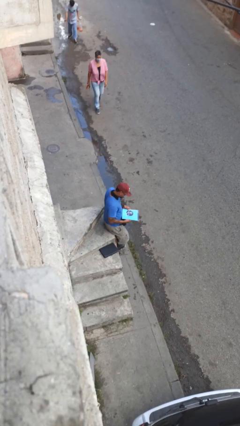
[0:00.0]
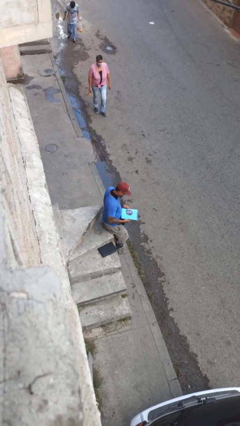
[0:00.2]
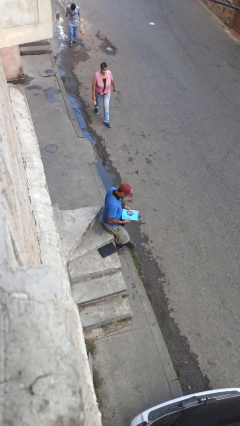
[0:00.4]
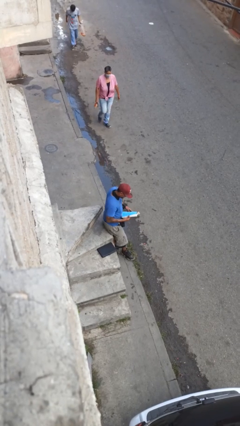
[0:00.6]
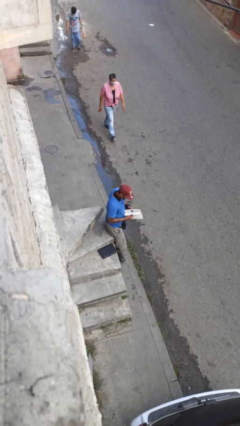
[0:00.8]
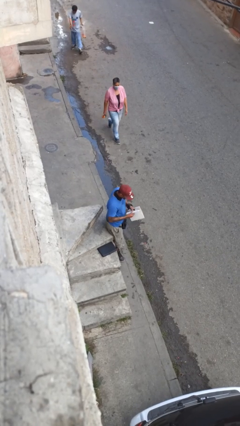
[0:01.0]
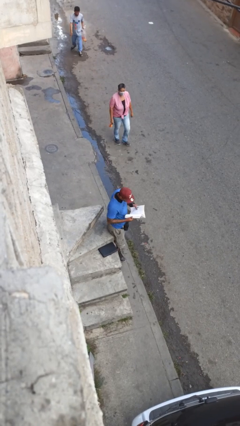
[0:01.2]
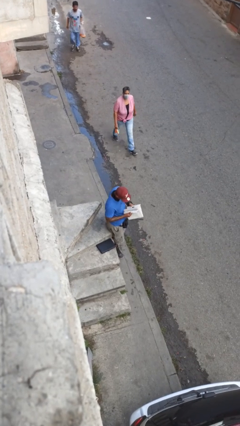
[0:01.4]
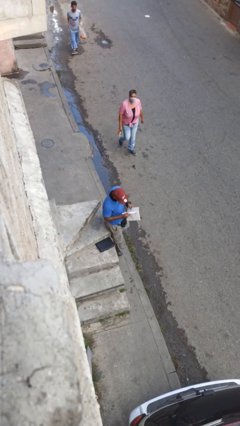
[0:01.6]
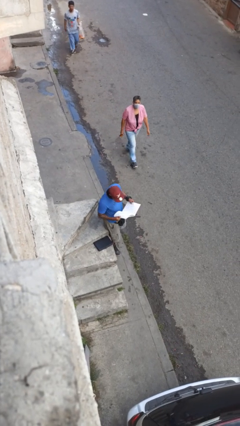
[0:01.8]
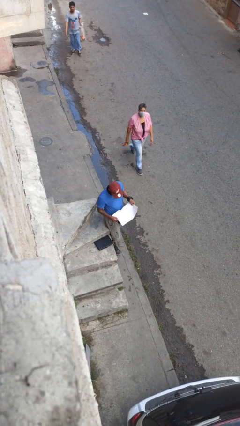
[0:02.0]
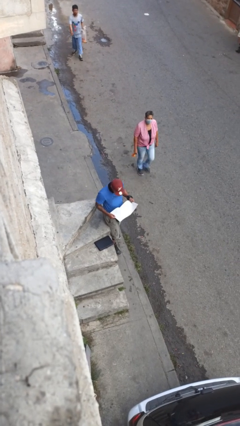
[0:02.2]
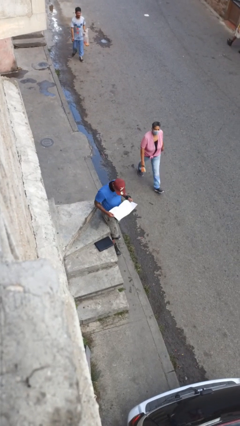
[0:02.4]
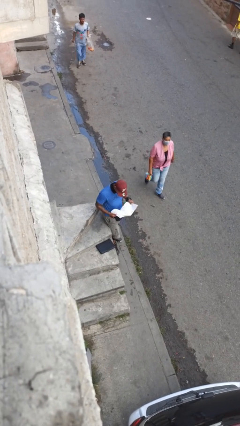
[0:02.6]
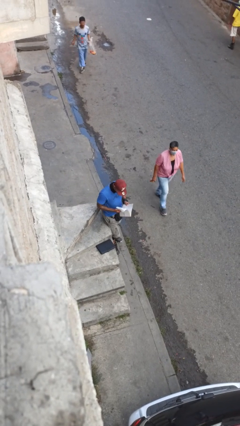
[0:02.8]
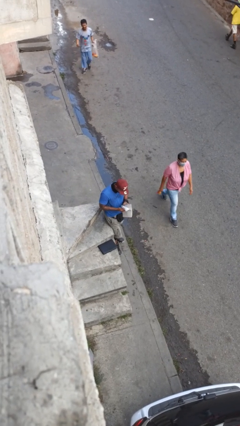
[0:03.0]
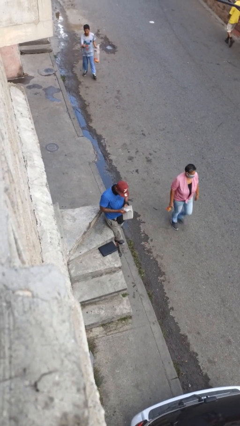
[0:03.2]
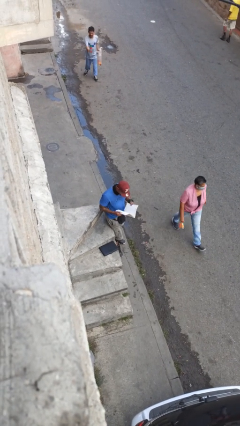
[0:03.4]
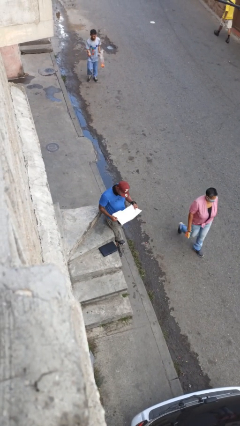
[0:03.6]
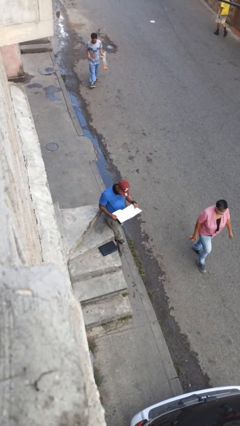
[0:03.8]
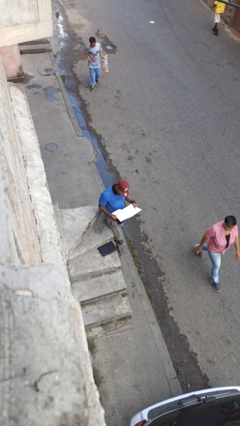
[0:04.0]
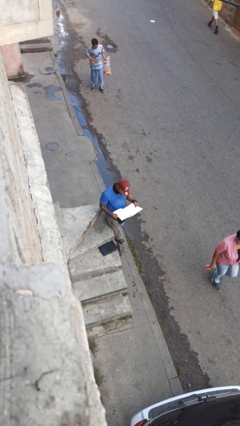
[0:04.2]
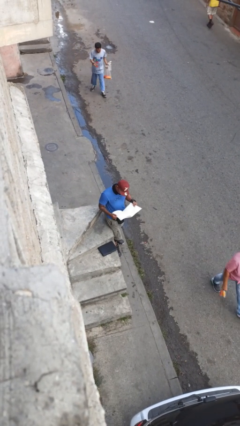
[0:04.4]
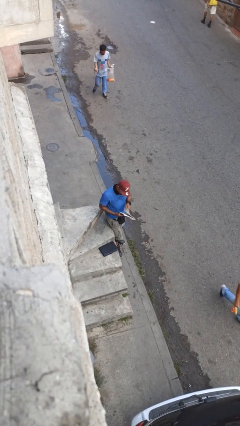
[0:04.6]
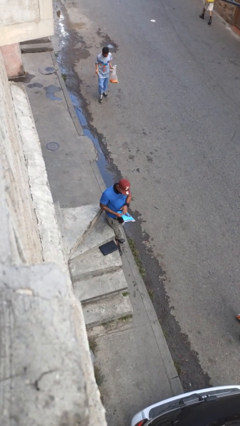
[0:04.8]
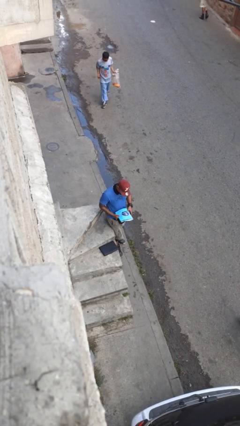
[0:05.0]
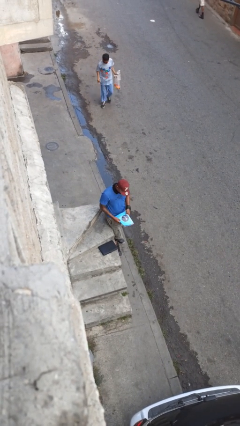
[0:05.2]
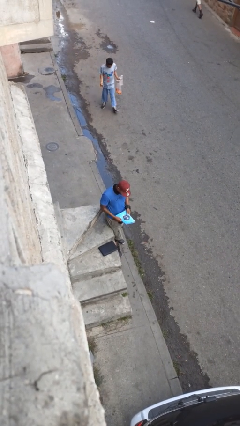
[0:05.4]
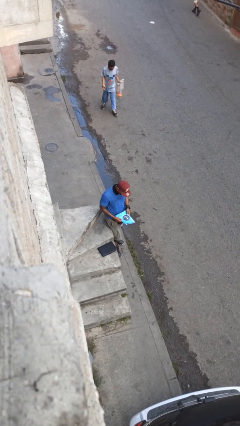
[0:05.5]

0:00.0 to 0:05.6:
person reads document

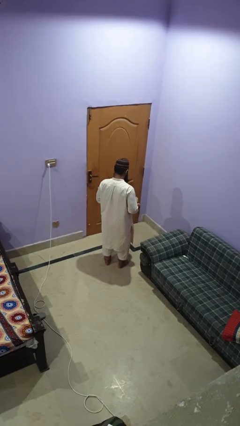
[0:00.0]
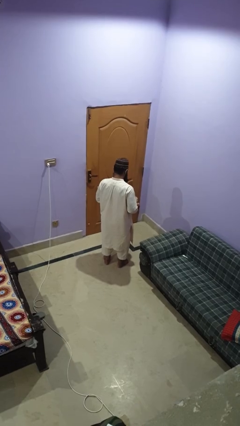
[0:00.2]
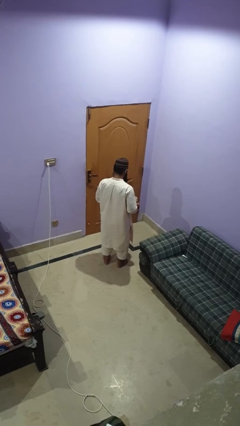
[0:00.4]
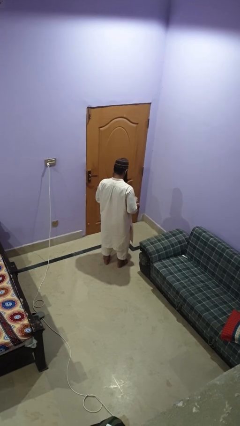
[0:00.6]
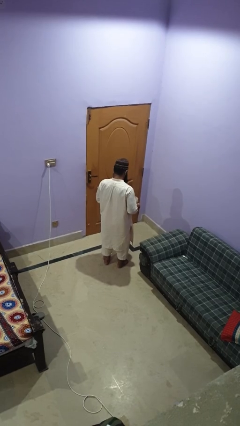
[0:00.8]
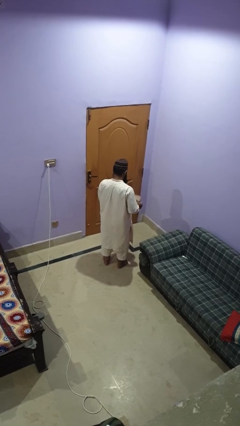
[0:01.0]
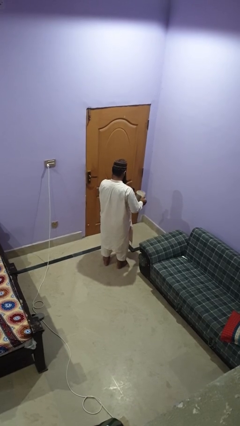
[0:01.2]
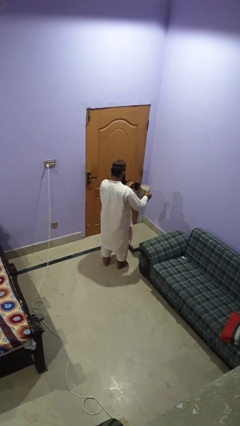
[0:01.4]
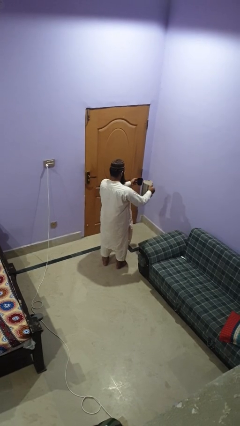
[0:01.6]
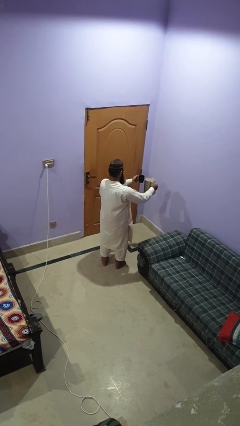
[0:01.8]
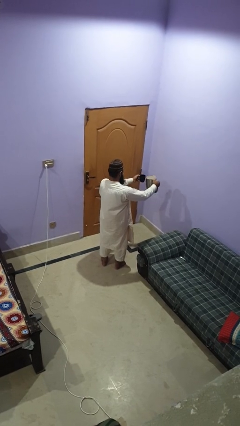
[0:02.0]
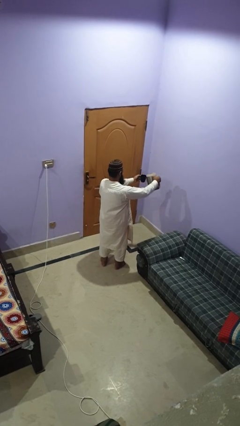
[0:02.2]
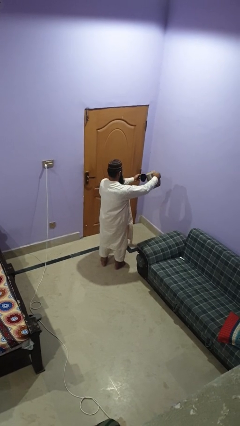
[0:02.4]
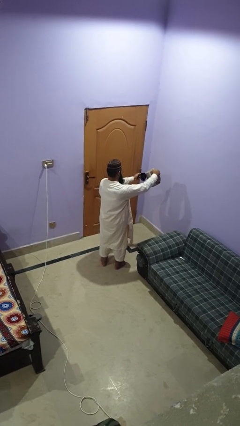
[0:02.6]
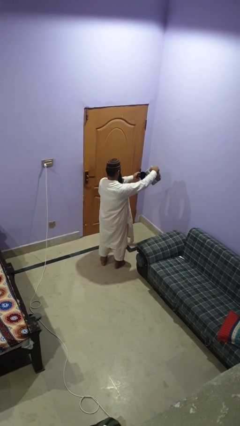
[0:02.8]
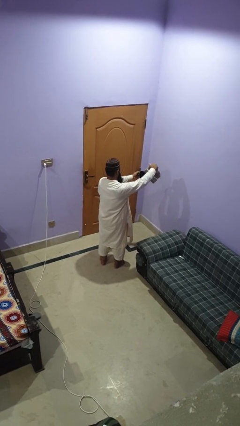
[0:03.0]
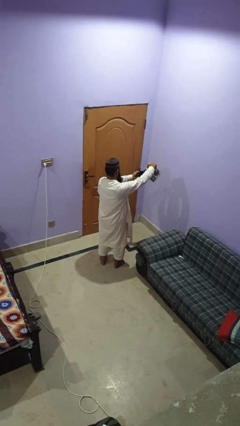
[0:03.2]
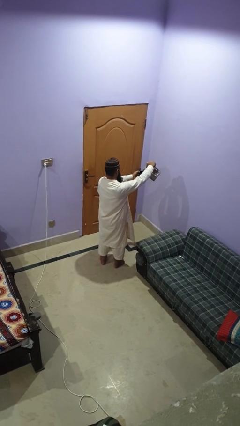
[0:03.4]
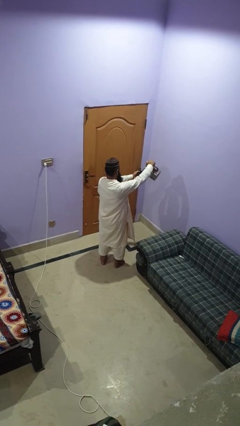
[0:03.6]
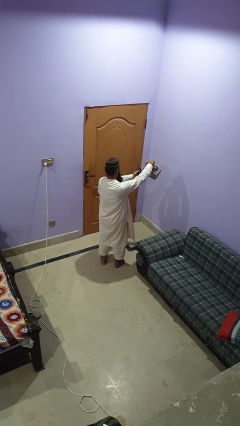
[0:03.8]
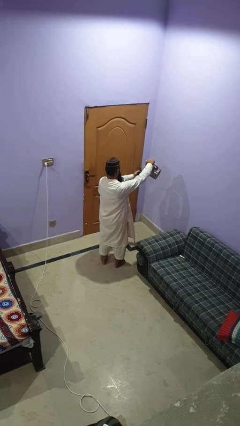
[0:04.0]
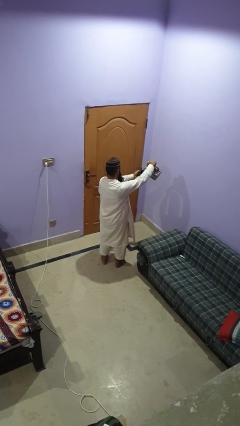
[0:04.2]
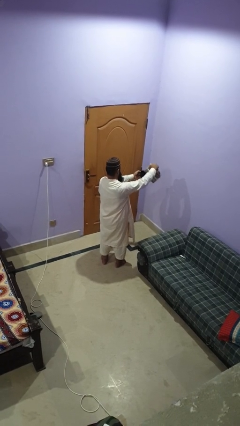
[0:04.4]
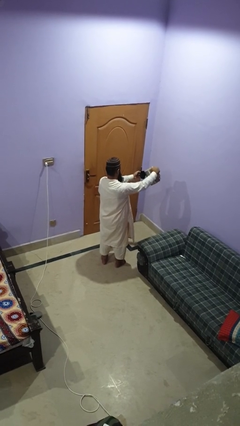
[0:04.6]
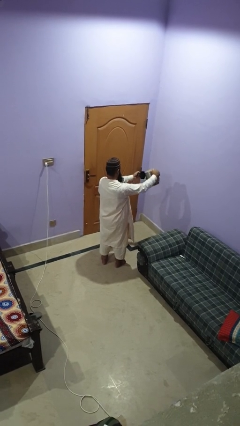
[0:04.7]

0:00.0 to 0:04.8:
person pours coffee into mug

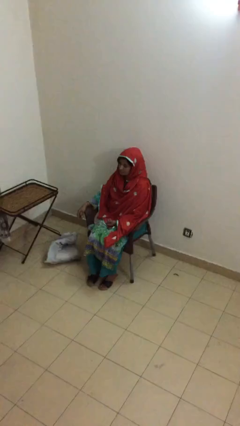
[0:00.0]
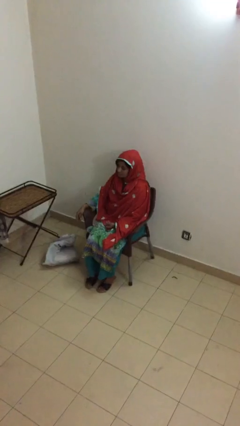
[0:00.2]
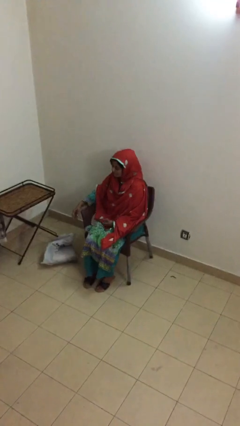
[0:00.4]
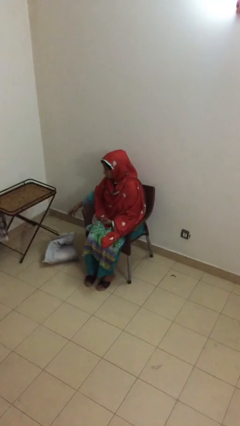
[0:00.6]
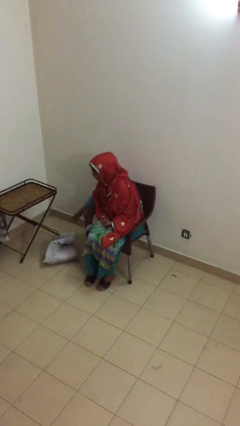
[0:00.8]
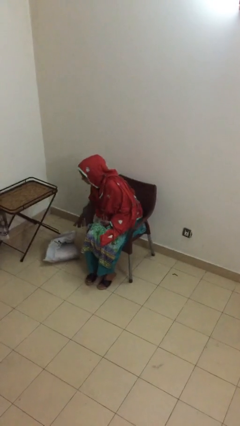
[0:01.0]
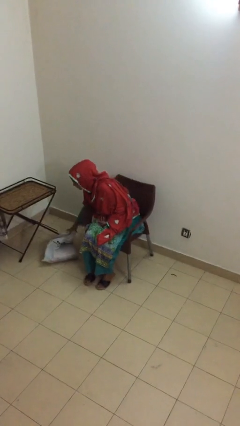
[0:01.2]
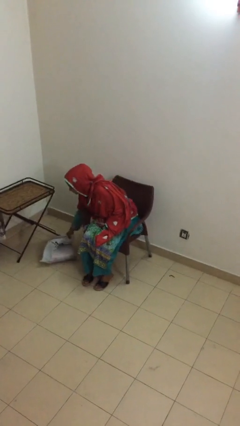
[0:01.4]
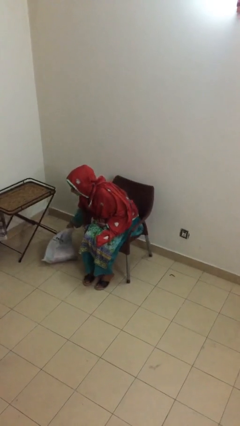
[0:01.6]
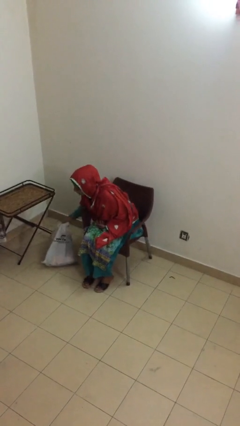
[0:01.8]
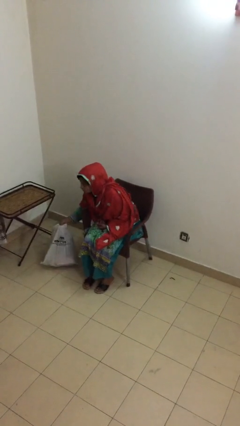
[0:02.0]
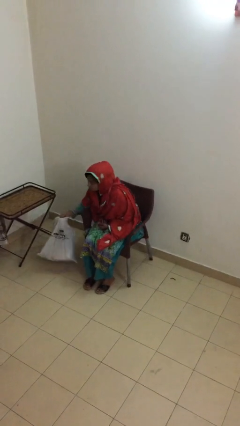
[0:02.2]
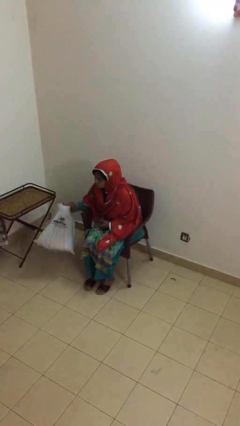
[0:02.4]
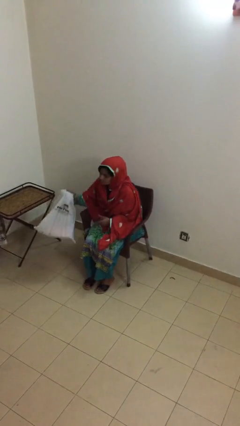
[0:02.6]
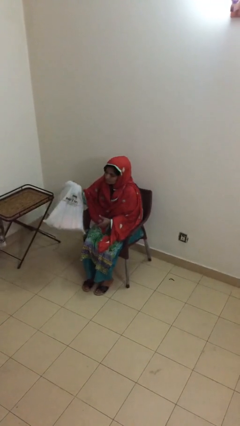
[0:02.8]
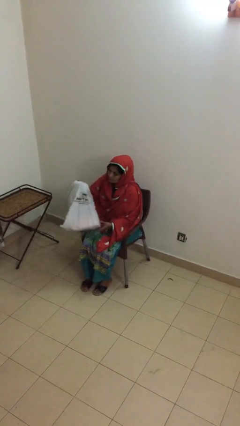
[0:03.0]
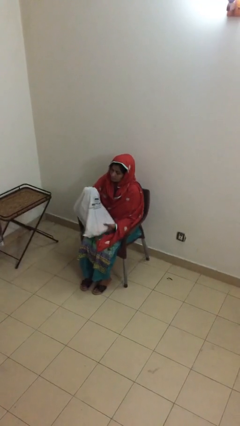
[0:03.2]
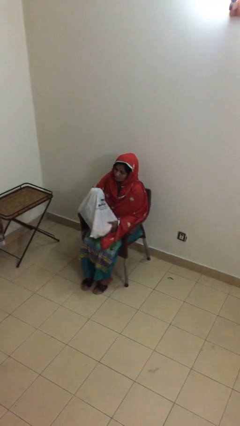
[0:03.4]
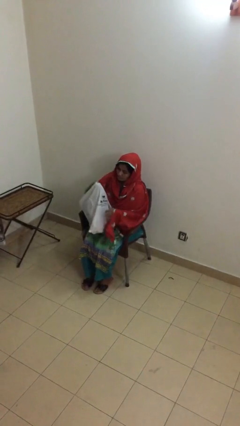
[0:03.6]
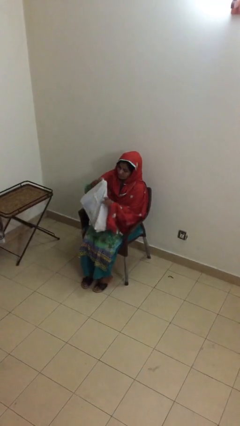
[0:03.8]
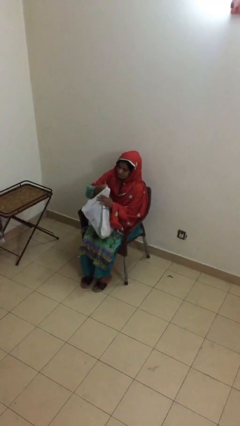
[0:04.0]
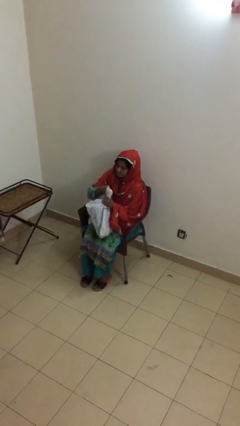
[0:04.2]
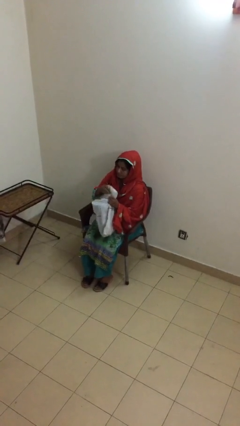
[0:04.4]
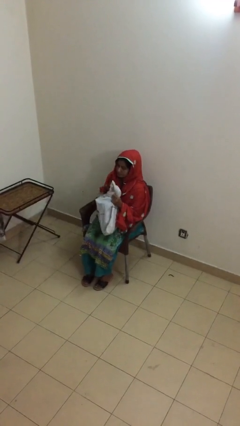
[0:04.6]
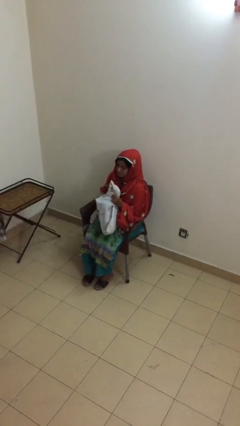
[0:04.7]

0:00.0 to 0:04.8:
person picks up object from floor

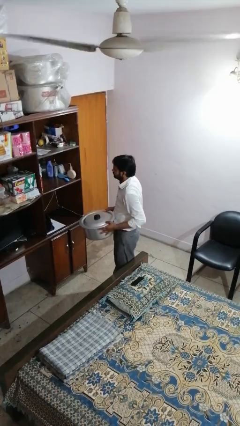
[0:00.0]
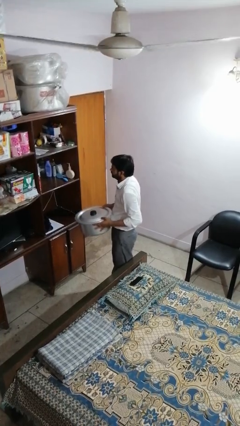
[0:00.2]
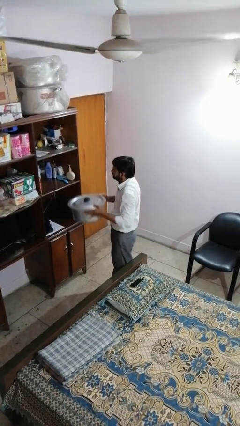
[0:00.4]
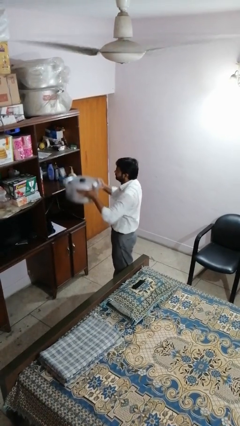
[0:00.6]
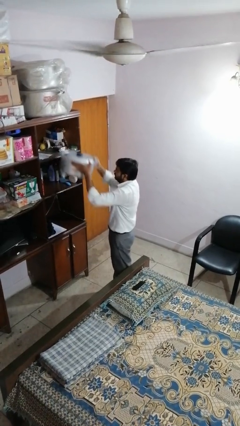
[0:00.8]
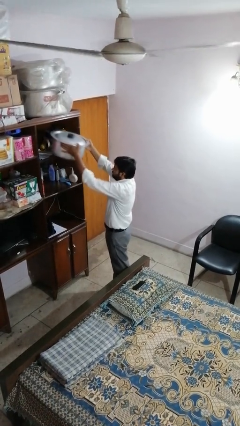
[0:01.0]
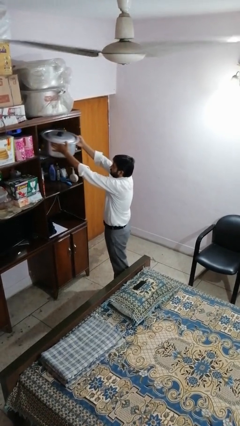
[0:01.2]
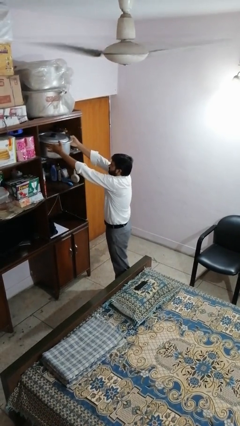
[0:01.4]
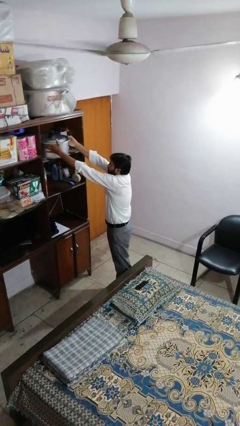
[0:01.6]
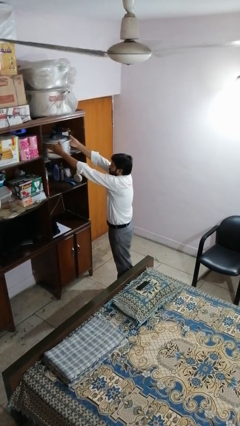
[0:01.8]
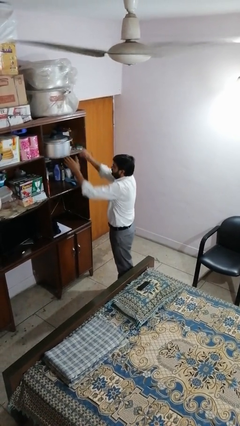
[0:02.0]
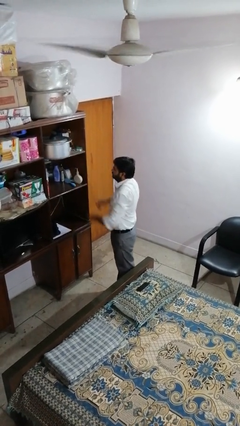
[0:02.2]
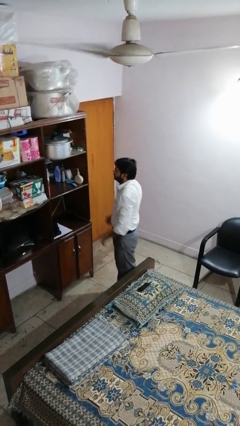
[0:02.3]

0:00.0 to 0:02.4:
person puts down object on shelf

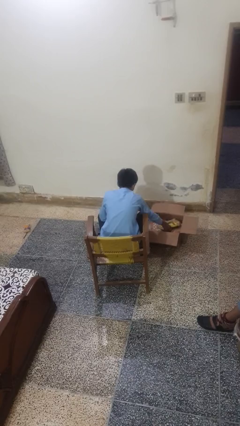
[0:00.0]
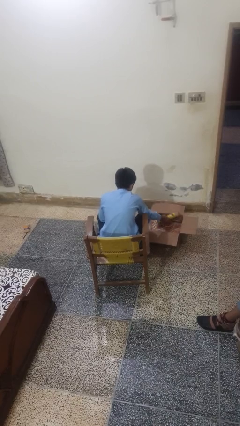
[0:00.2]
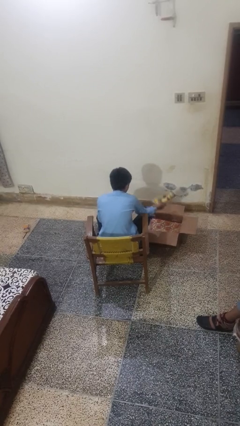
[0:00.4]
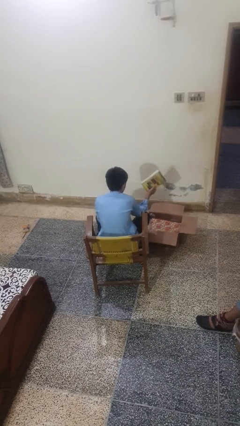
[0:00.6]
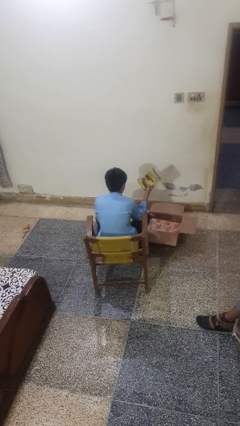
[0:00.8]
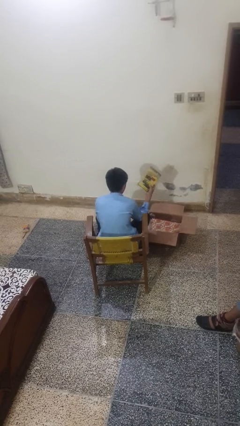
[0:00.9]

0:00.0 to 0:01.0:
person takes object from box
